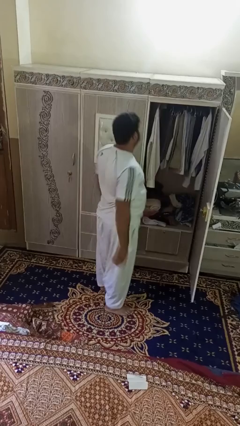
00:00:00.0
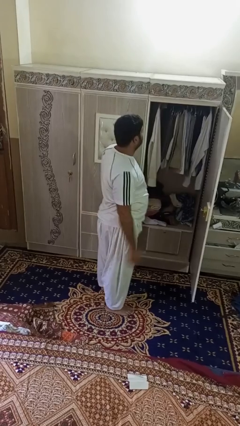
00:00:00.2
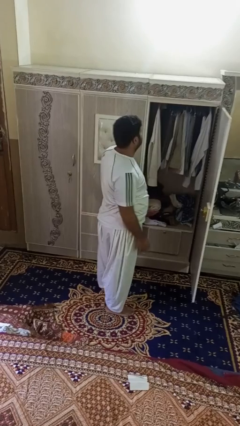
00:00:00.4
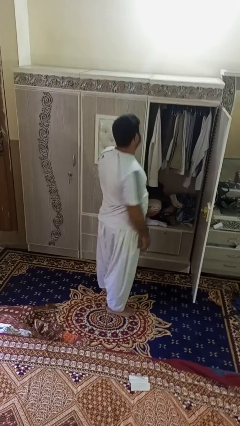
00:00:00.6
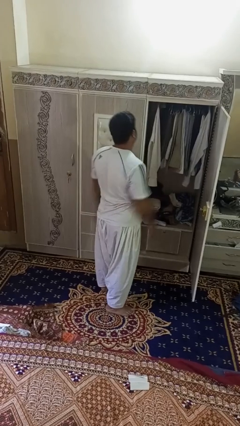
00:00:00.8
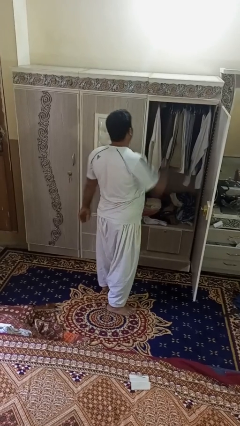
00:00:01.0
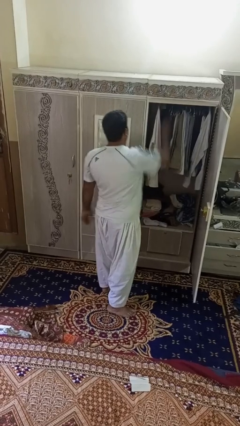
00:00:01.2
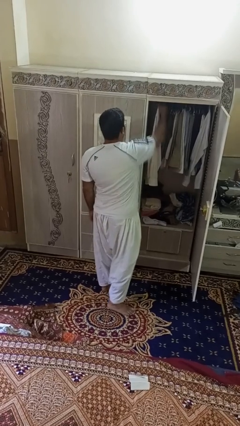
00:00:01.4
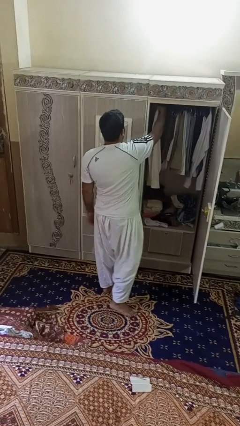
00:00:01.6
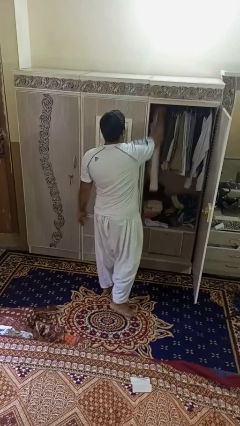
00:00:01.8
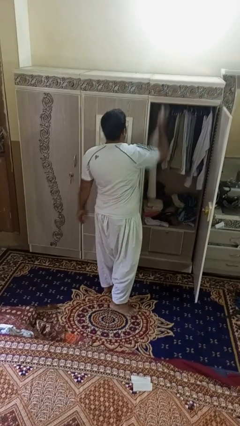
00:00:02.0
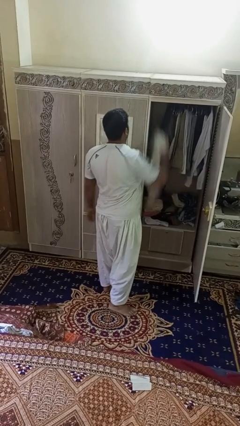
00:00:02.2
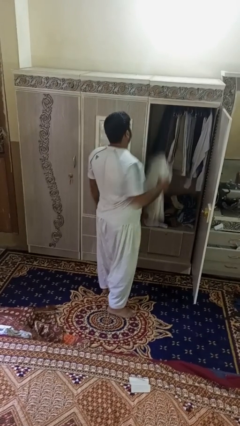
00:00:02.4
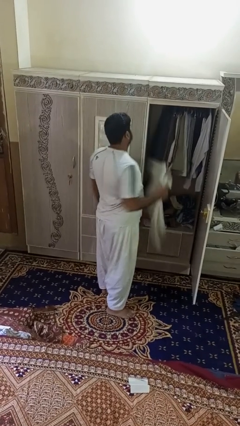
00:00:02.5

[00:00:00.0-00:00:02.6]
person takes clothes from closet

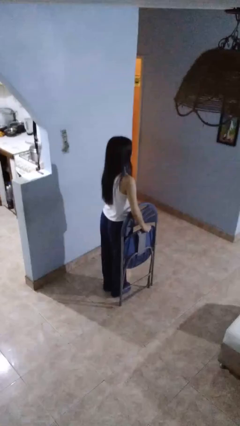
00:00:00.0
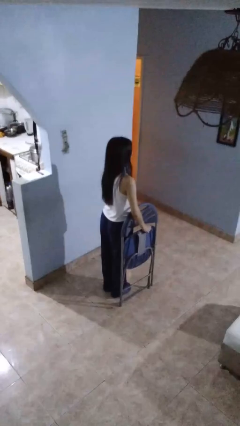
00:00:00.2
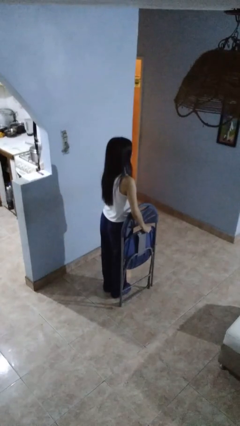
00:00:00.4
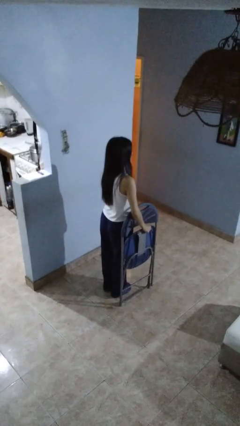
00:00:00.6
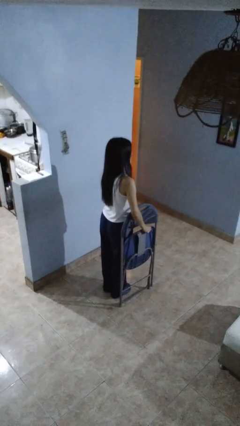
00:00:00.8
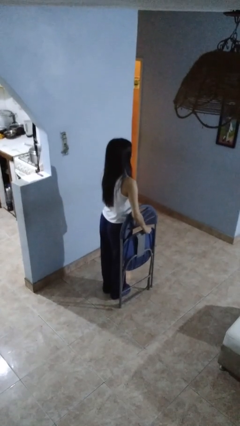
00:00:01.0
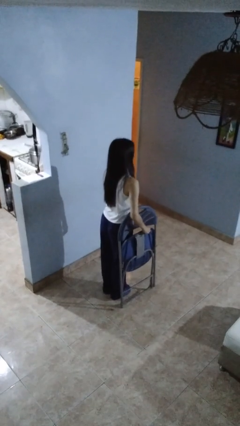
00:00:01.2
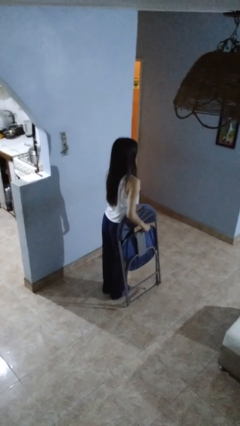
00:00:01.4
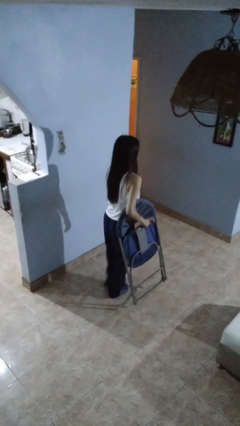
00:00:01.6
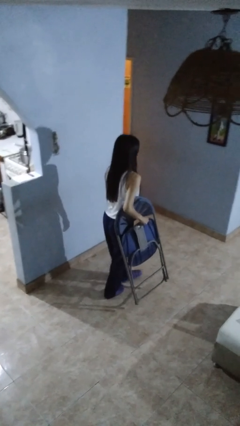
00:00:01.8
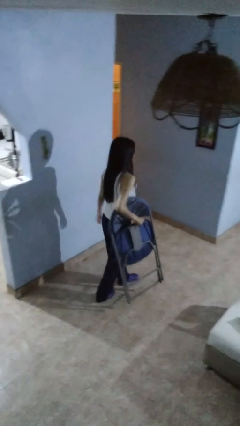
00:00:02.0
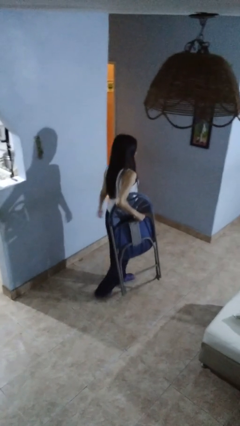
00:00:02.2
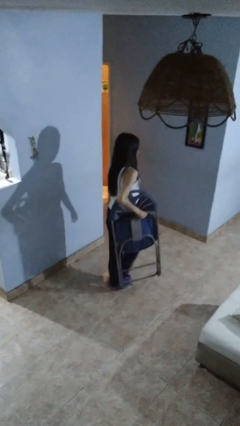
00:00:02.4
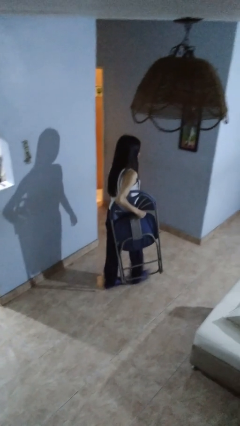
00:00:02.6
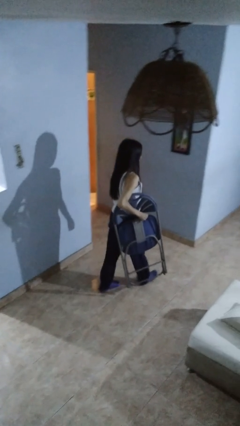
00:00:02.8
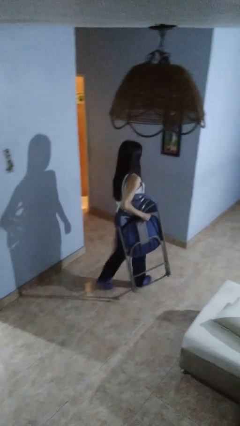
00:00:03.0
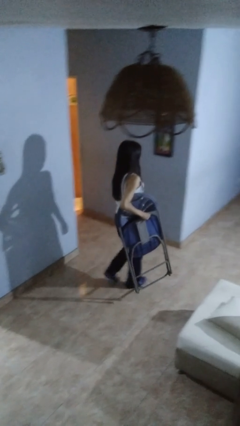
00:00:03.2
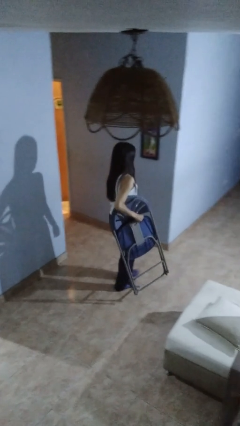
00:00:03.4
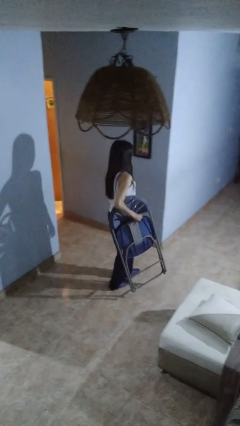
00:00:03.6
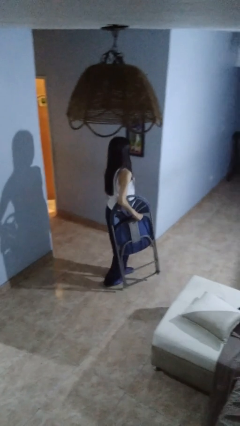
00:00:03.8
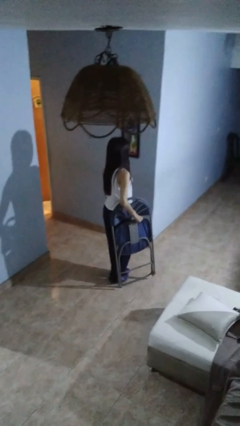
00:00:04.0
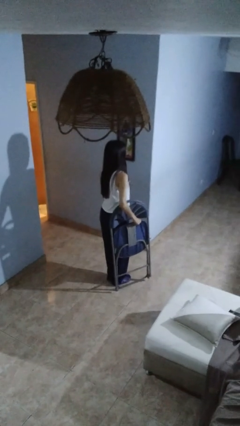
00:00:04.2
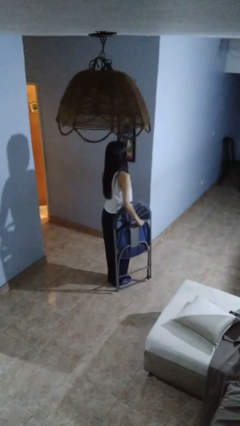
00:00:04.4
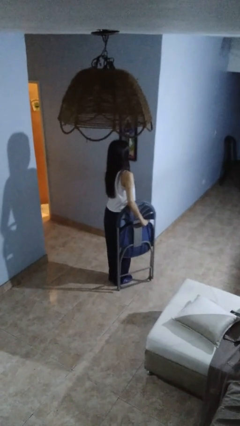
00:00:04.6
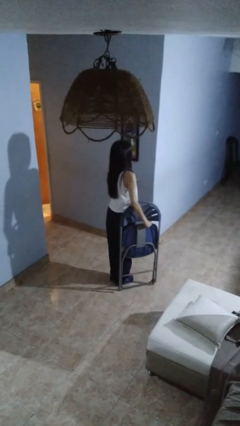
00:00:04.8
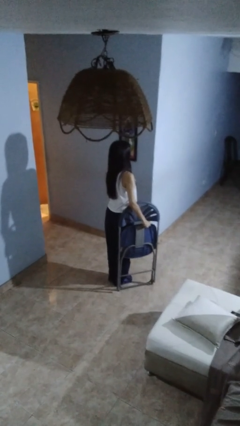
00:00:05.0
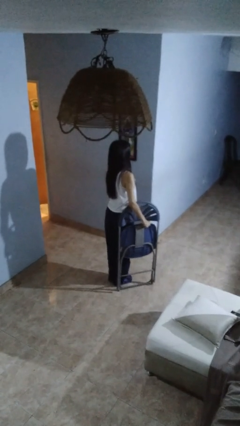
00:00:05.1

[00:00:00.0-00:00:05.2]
person carries furniture

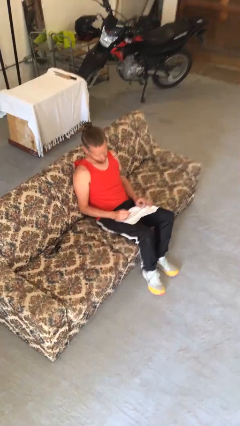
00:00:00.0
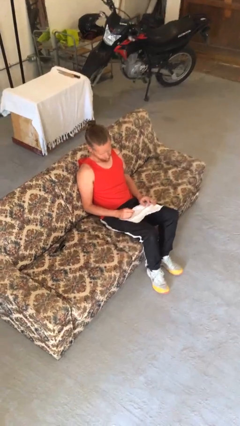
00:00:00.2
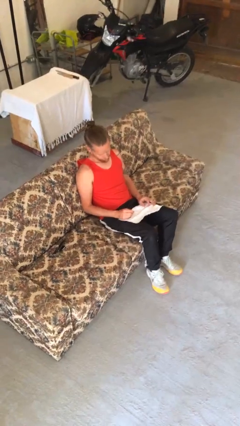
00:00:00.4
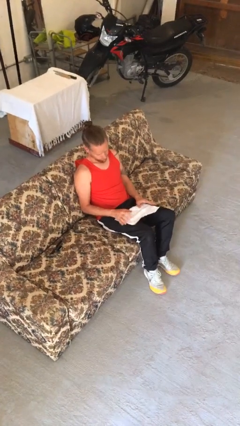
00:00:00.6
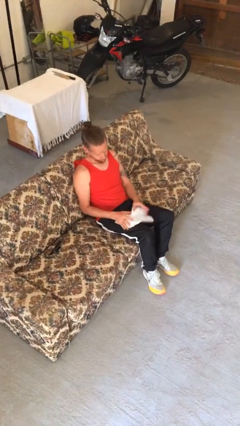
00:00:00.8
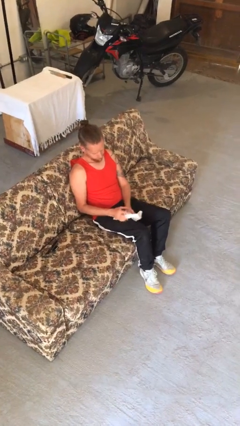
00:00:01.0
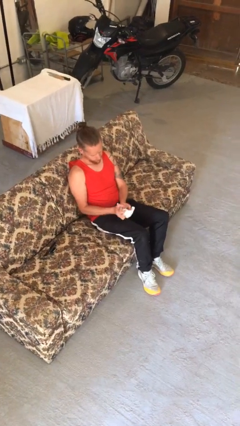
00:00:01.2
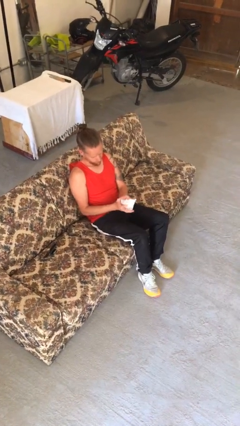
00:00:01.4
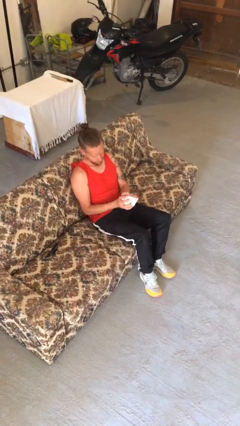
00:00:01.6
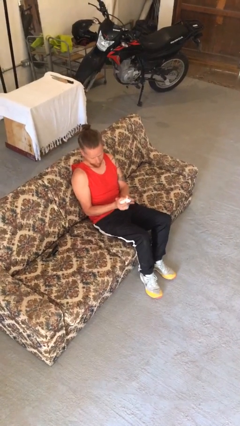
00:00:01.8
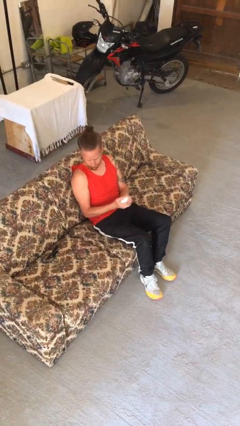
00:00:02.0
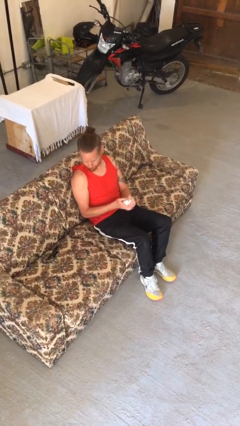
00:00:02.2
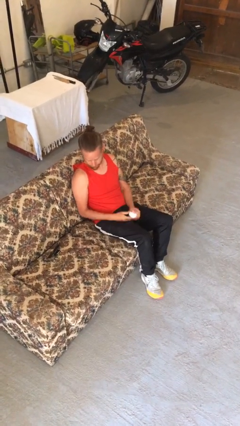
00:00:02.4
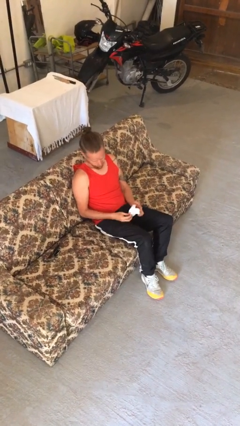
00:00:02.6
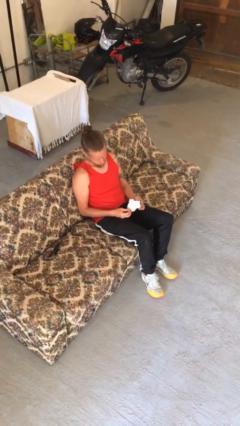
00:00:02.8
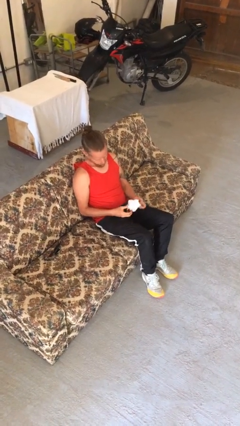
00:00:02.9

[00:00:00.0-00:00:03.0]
person crumples paper

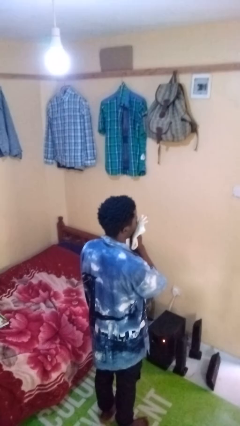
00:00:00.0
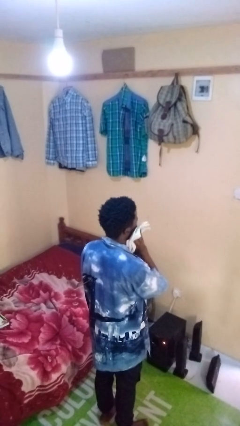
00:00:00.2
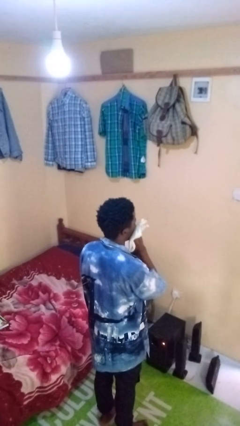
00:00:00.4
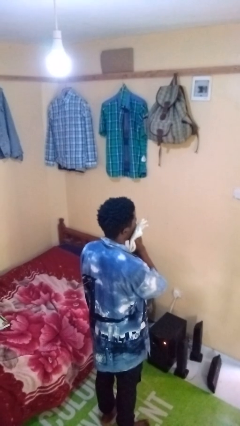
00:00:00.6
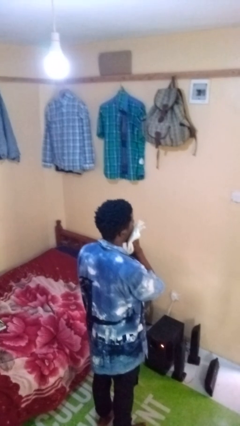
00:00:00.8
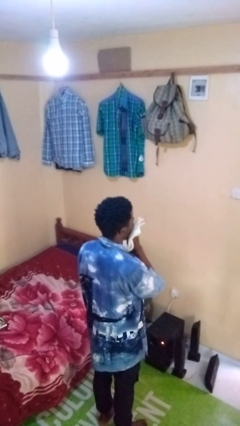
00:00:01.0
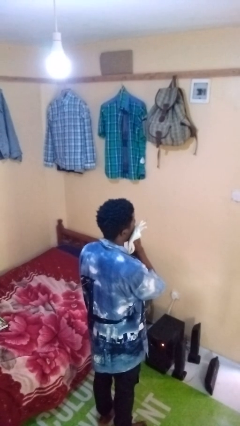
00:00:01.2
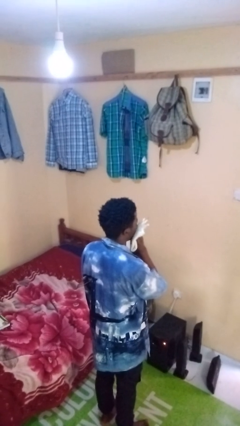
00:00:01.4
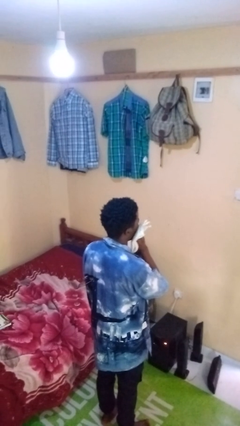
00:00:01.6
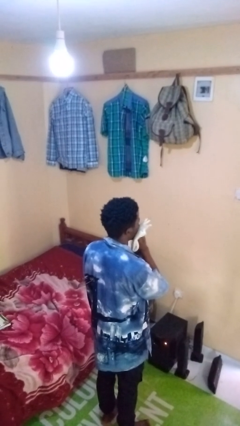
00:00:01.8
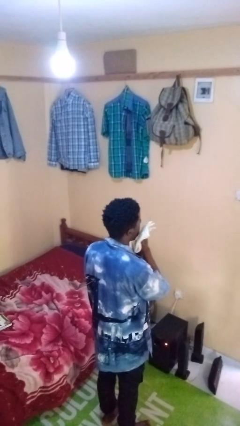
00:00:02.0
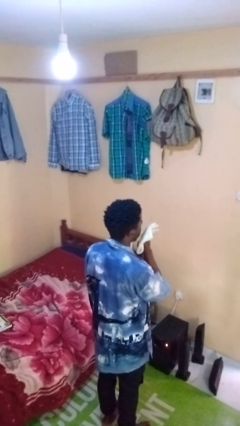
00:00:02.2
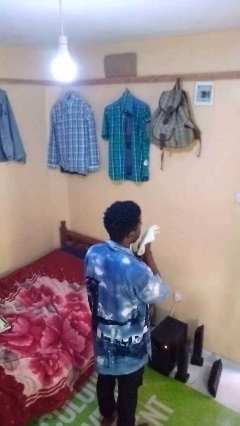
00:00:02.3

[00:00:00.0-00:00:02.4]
person wipes mouth with napkin

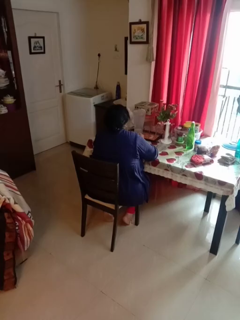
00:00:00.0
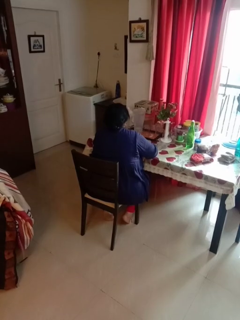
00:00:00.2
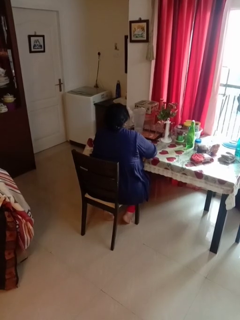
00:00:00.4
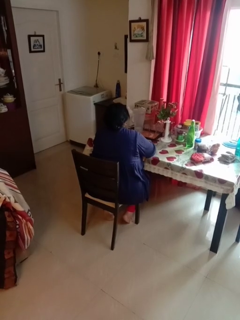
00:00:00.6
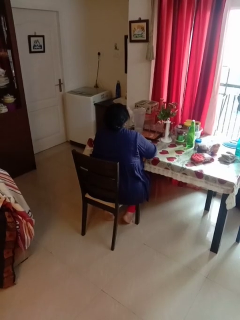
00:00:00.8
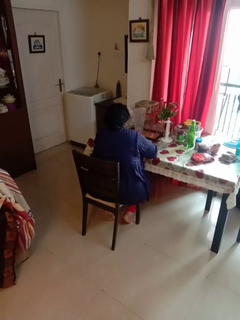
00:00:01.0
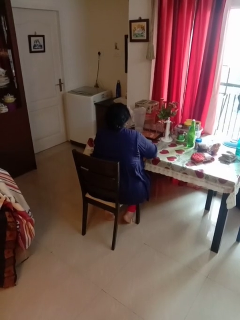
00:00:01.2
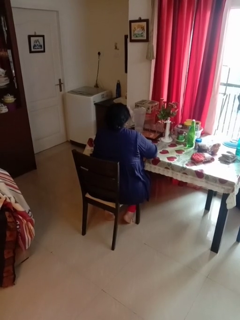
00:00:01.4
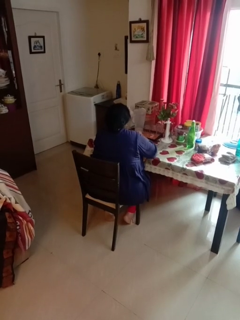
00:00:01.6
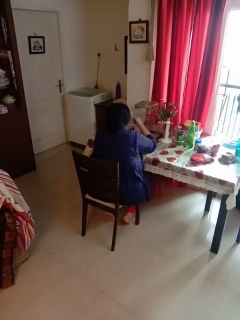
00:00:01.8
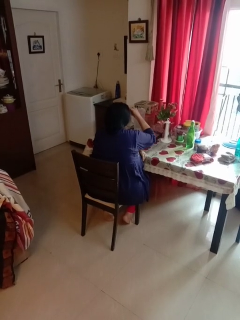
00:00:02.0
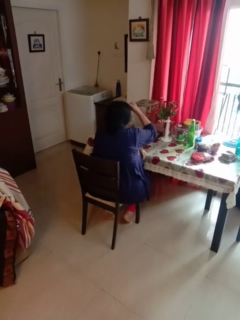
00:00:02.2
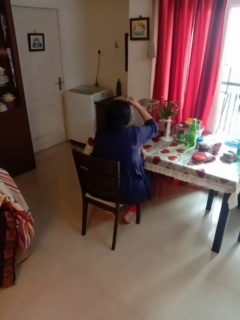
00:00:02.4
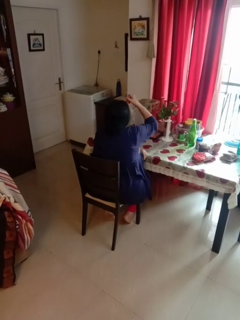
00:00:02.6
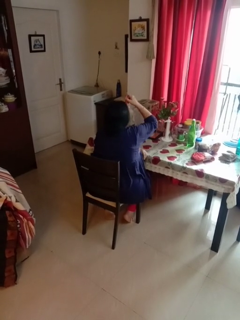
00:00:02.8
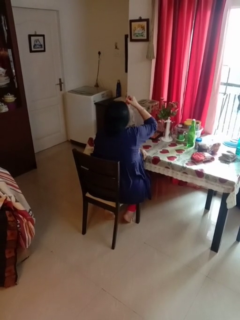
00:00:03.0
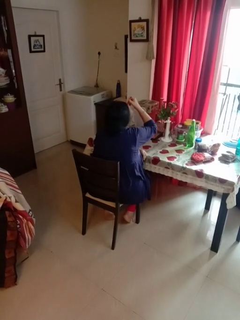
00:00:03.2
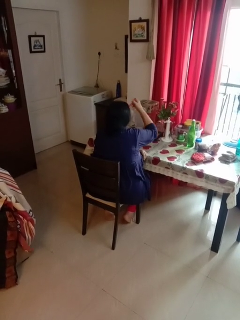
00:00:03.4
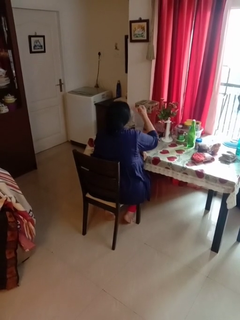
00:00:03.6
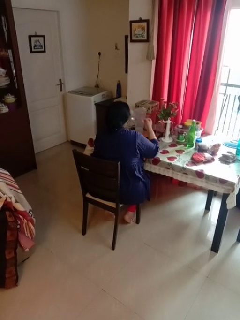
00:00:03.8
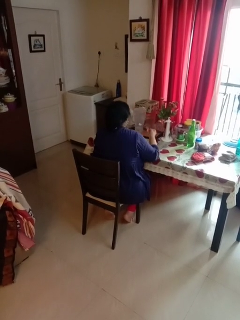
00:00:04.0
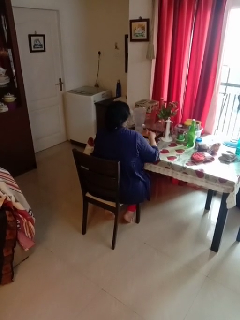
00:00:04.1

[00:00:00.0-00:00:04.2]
person eats with utensil

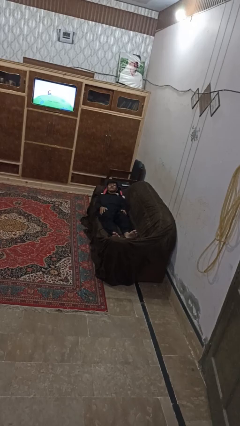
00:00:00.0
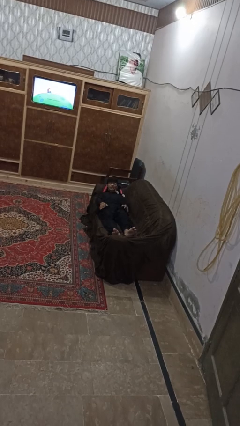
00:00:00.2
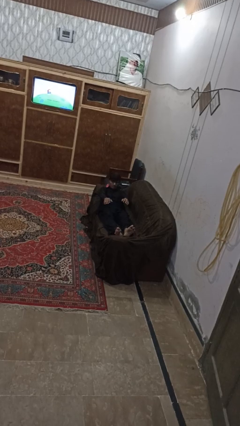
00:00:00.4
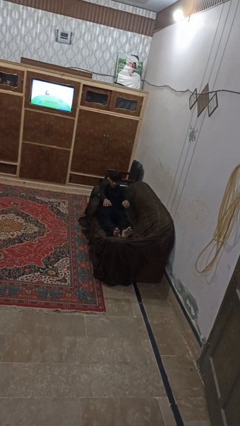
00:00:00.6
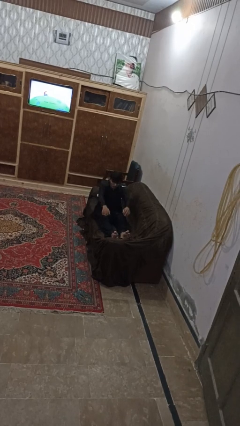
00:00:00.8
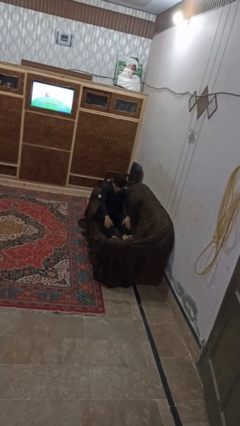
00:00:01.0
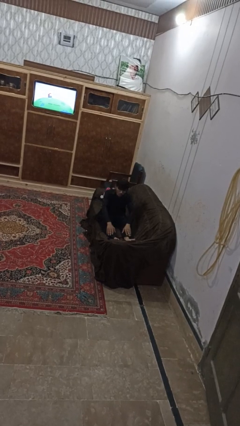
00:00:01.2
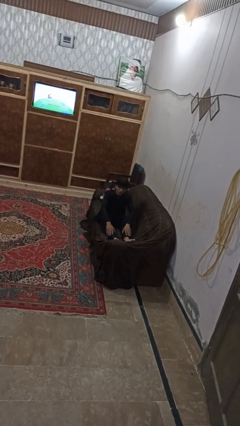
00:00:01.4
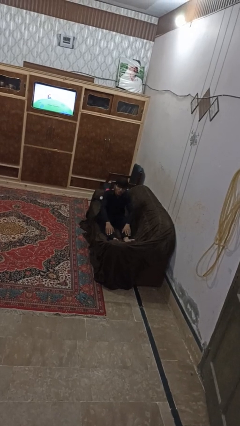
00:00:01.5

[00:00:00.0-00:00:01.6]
person stands up
